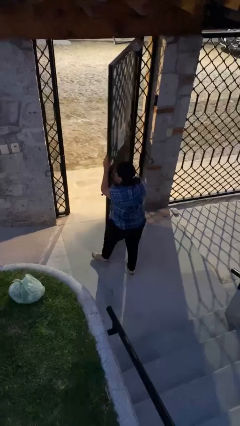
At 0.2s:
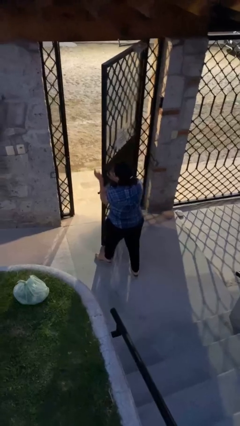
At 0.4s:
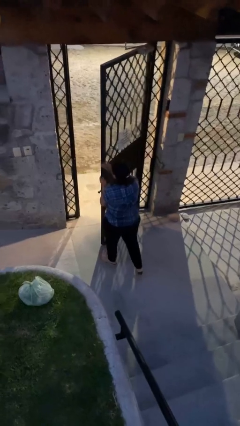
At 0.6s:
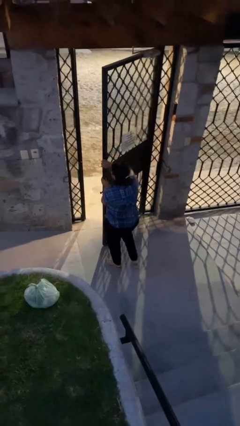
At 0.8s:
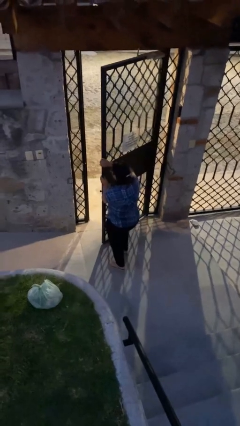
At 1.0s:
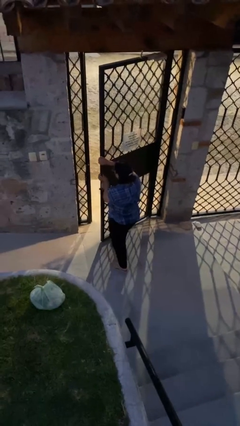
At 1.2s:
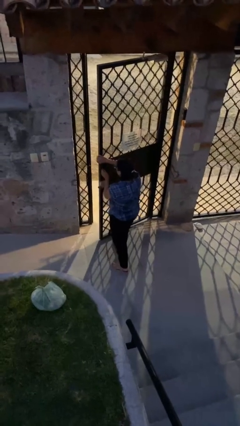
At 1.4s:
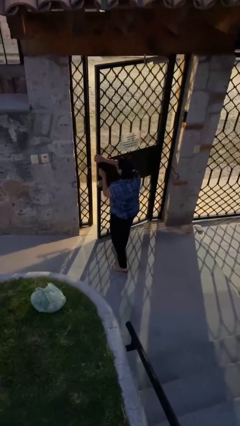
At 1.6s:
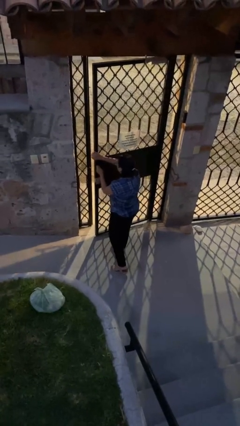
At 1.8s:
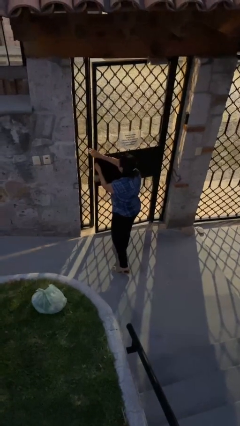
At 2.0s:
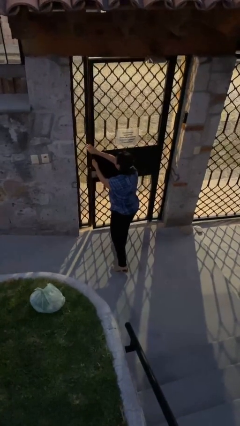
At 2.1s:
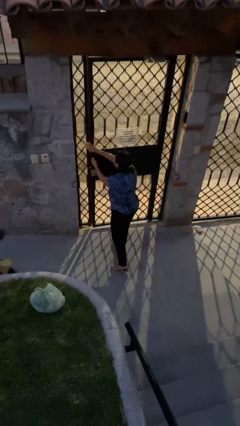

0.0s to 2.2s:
person closes facility door

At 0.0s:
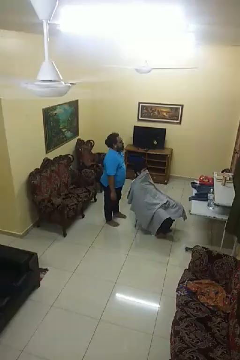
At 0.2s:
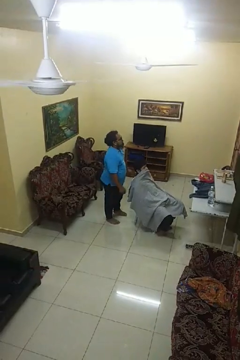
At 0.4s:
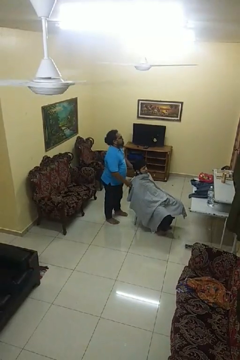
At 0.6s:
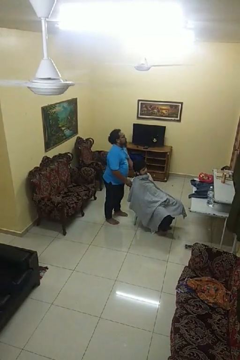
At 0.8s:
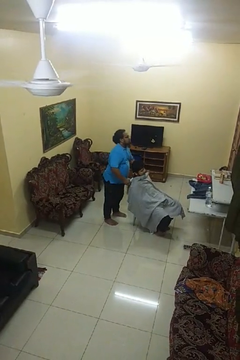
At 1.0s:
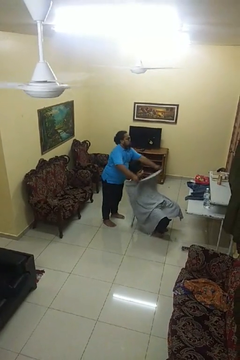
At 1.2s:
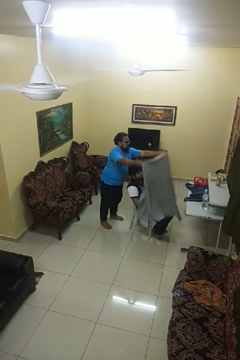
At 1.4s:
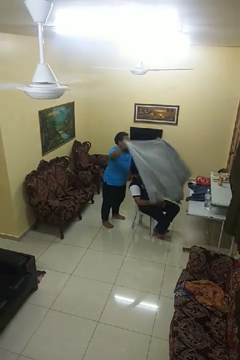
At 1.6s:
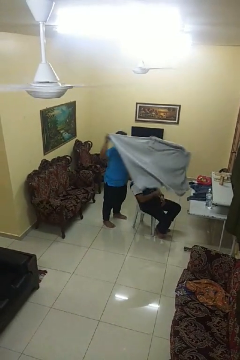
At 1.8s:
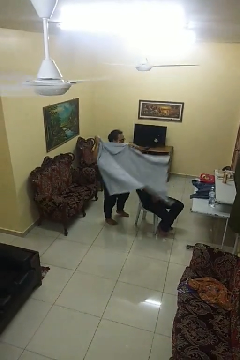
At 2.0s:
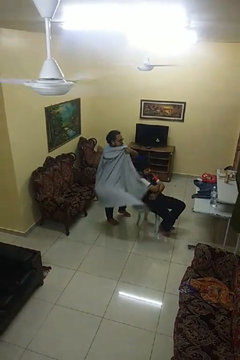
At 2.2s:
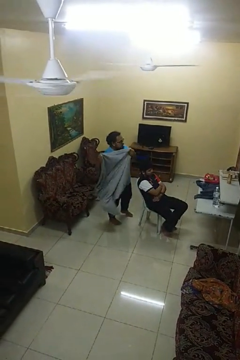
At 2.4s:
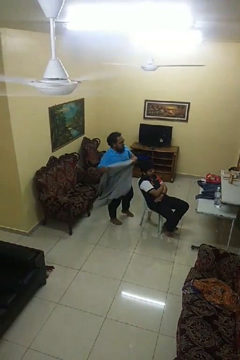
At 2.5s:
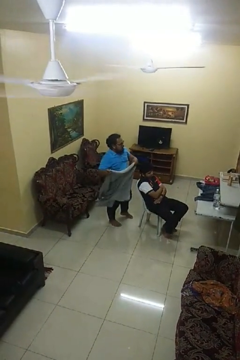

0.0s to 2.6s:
person uncovers friend with blanket

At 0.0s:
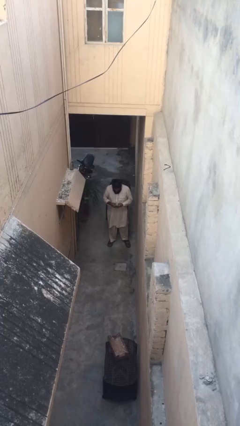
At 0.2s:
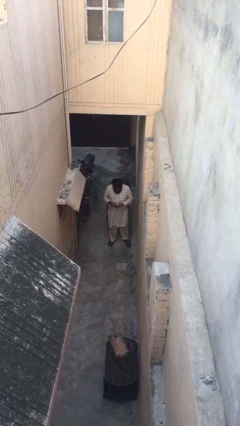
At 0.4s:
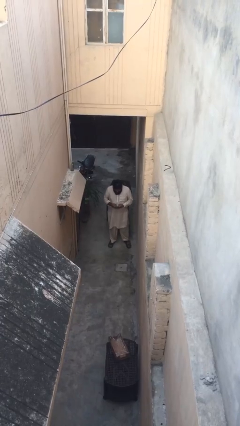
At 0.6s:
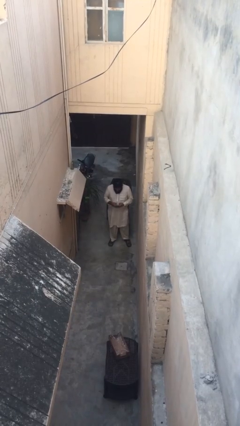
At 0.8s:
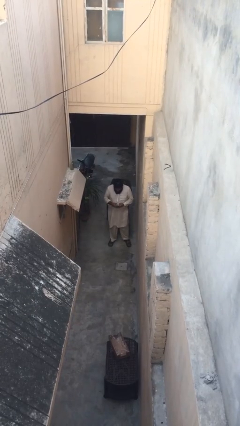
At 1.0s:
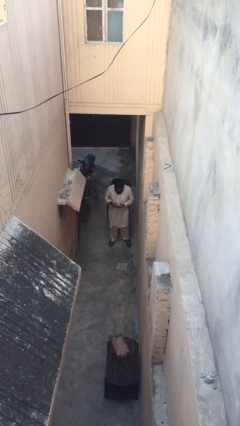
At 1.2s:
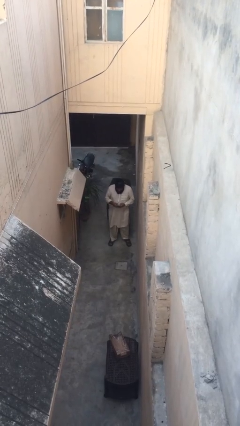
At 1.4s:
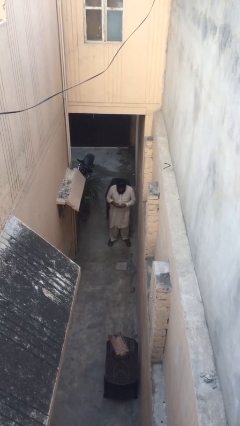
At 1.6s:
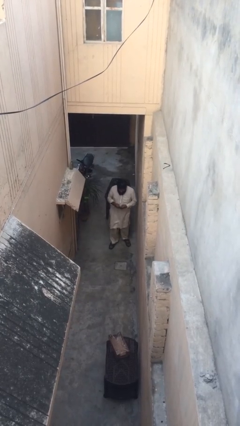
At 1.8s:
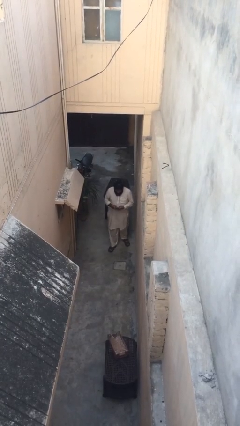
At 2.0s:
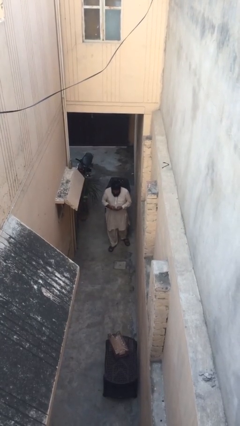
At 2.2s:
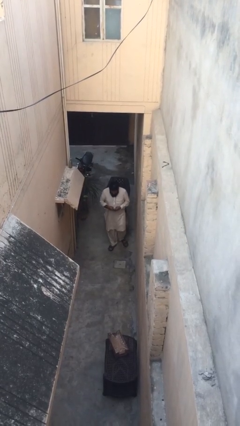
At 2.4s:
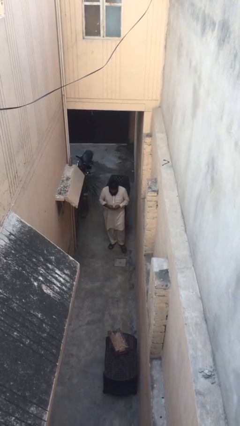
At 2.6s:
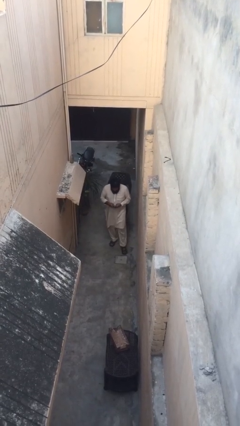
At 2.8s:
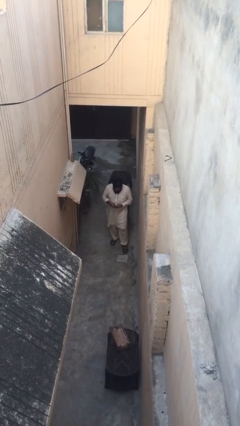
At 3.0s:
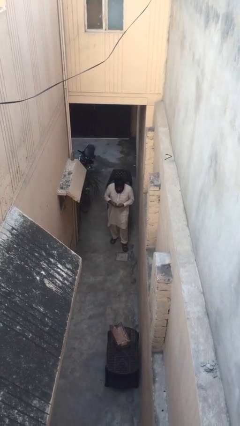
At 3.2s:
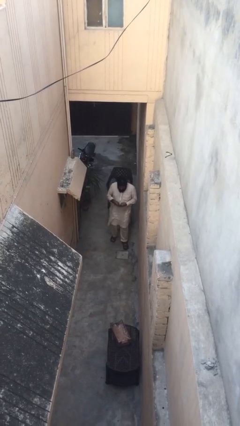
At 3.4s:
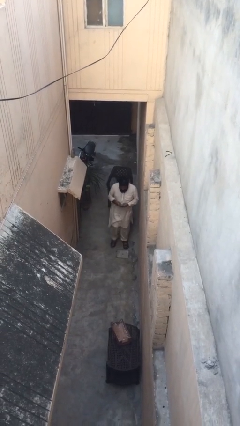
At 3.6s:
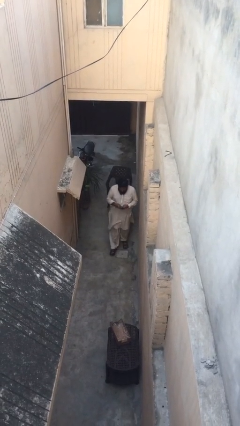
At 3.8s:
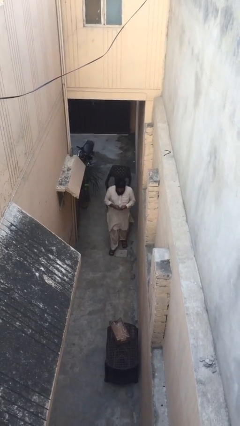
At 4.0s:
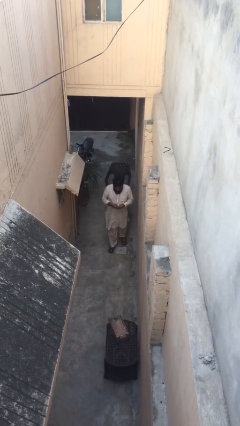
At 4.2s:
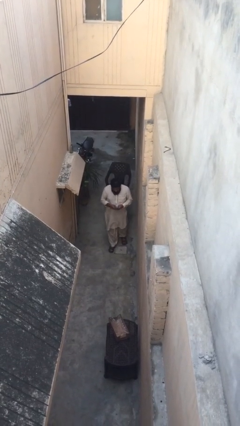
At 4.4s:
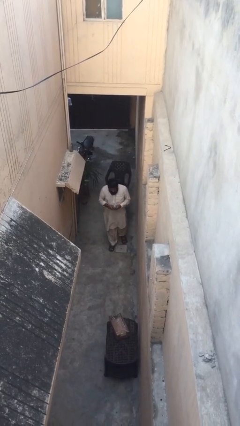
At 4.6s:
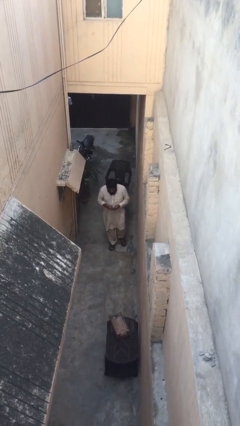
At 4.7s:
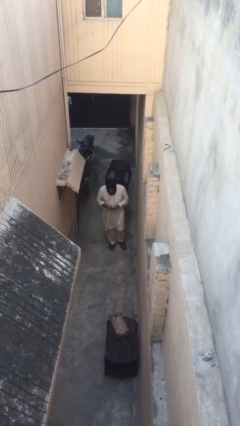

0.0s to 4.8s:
person texts on phone

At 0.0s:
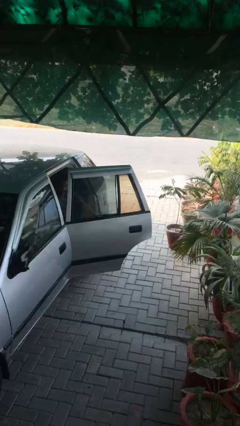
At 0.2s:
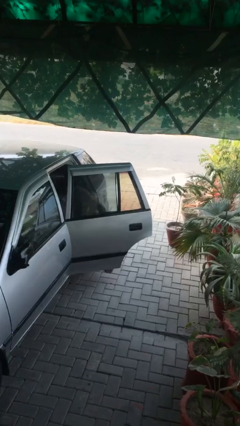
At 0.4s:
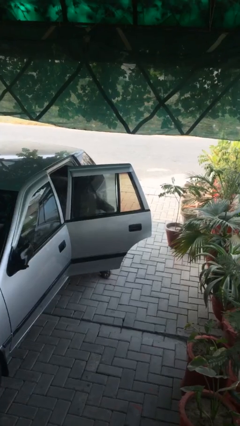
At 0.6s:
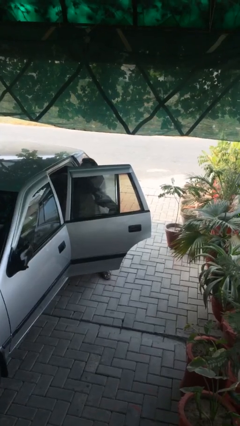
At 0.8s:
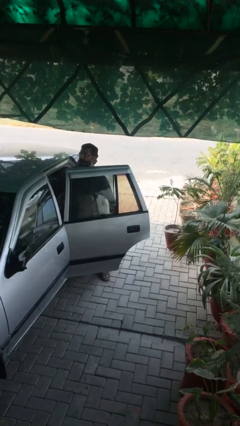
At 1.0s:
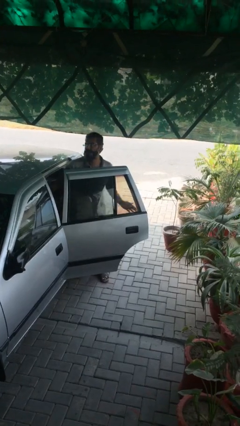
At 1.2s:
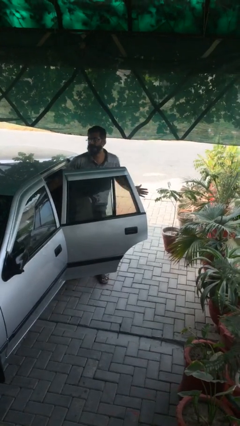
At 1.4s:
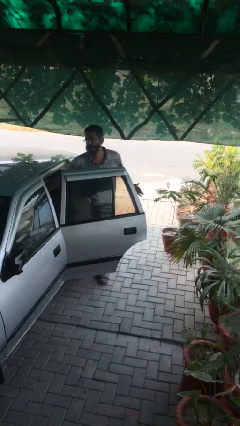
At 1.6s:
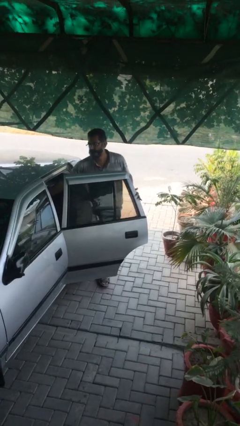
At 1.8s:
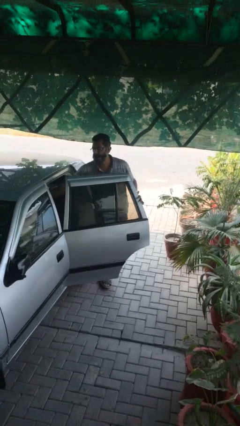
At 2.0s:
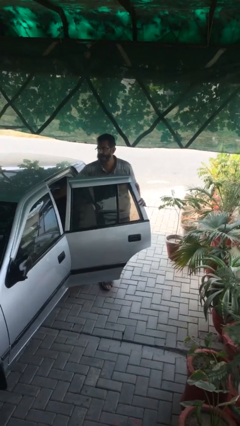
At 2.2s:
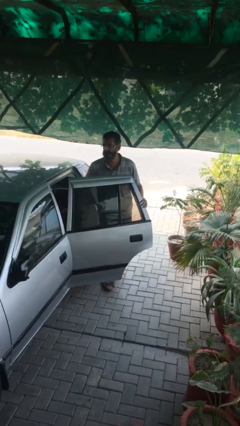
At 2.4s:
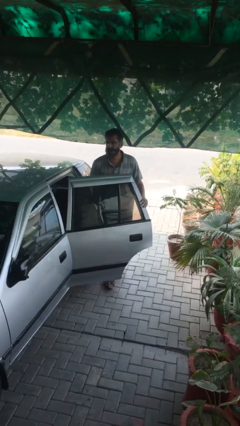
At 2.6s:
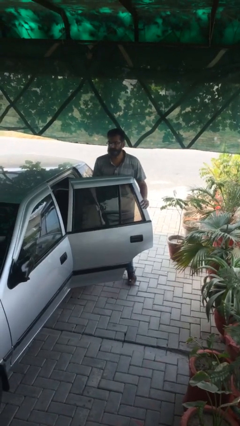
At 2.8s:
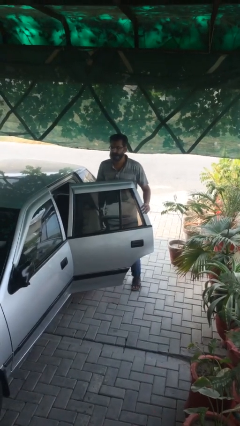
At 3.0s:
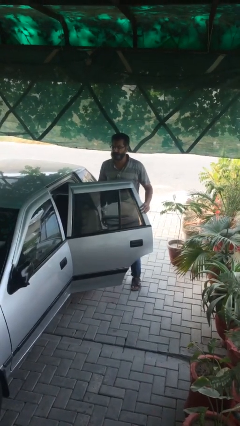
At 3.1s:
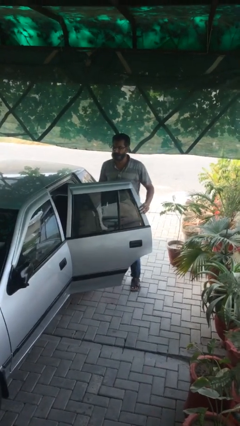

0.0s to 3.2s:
person exits car

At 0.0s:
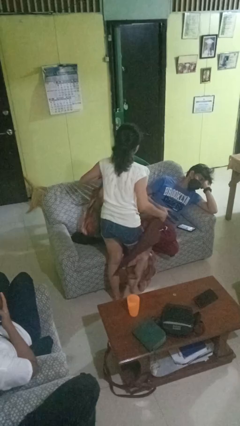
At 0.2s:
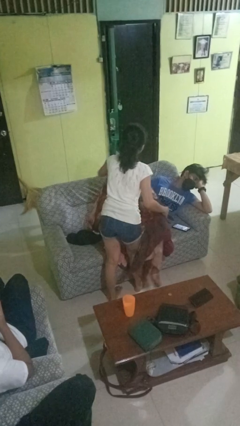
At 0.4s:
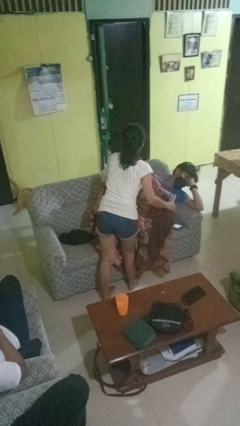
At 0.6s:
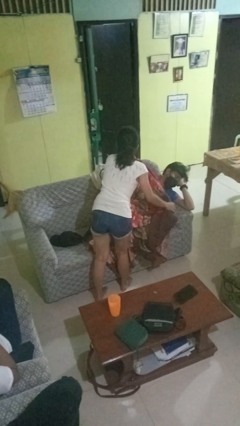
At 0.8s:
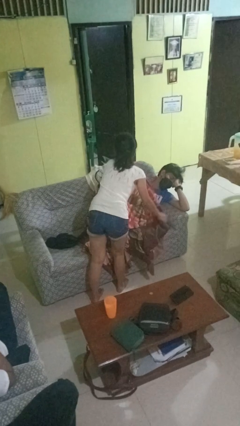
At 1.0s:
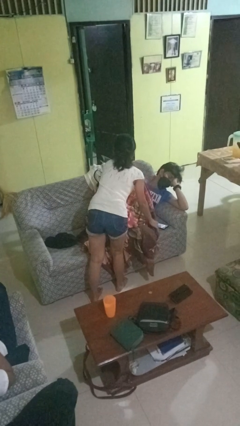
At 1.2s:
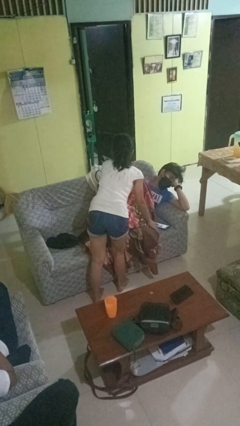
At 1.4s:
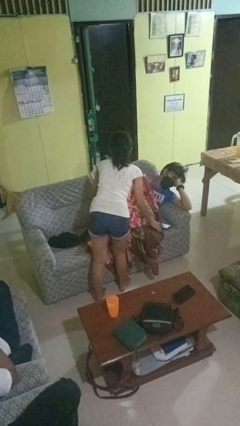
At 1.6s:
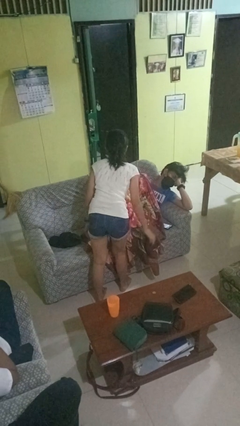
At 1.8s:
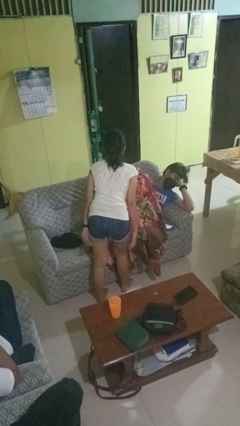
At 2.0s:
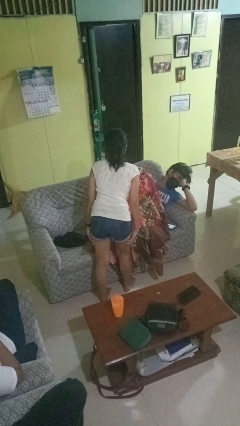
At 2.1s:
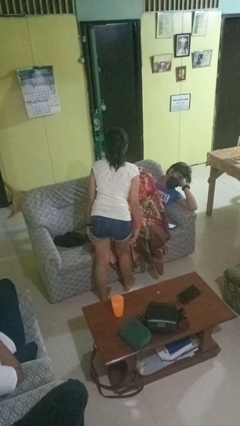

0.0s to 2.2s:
person covers friend with blanket

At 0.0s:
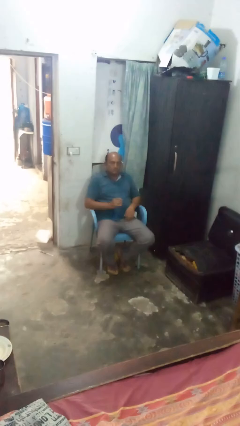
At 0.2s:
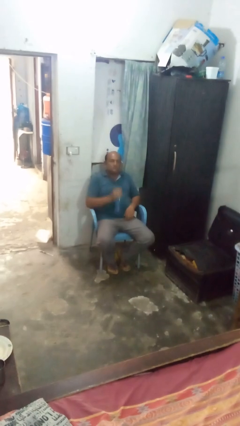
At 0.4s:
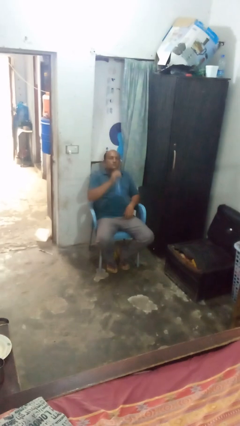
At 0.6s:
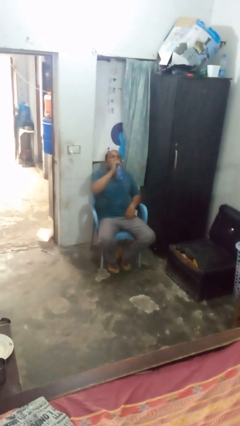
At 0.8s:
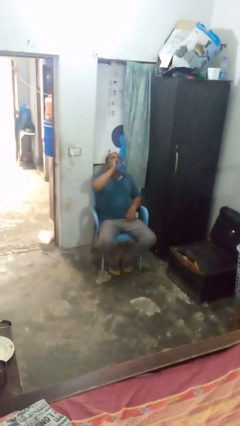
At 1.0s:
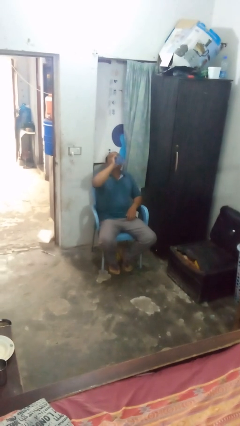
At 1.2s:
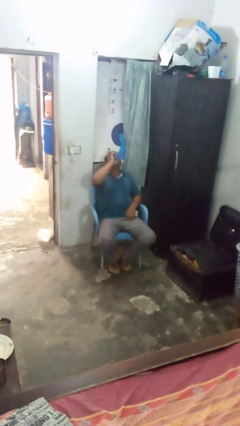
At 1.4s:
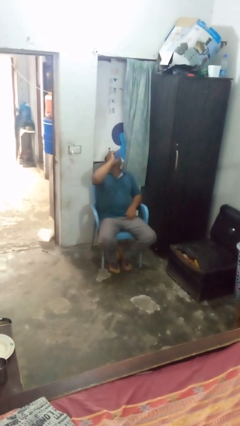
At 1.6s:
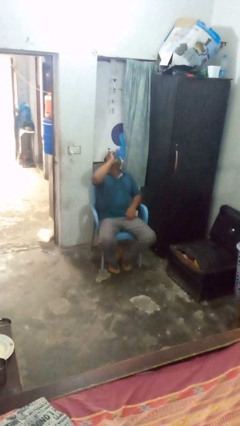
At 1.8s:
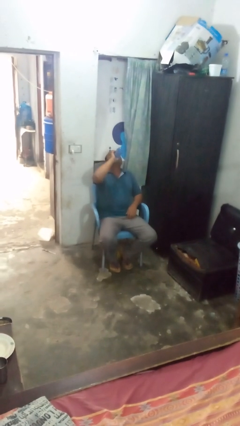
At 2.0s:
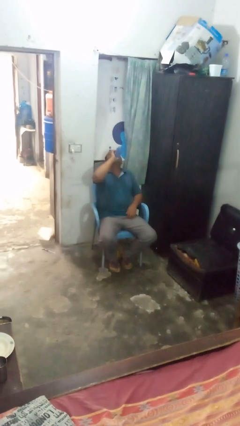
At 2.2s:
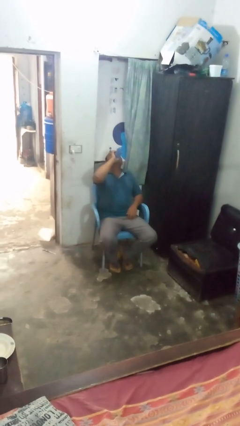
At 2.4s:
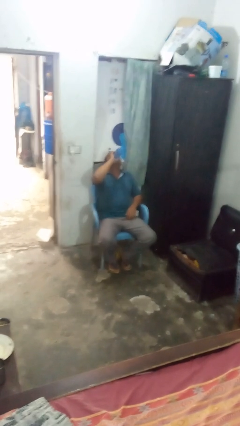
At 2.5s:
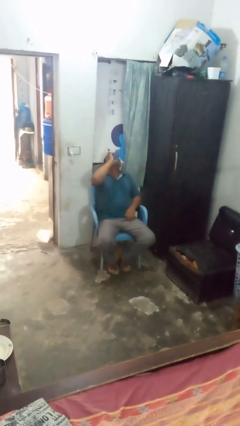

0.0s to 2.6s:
person drinks from bottle

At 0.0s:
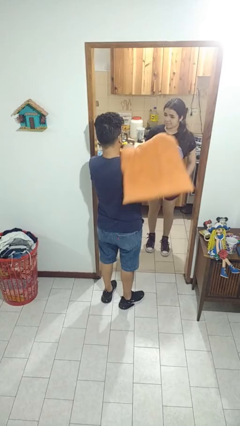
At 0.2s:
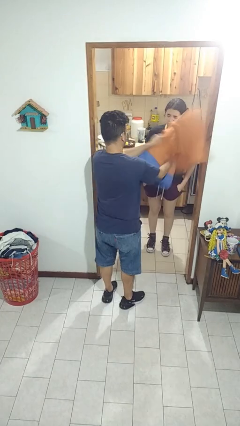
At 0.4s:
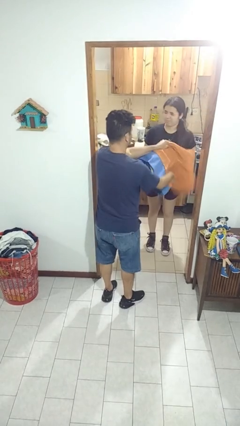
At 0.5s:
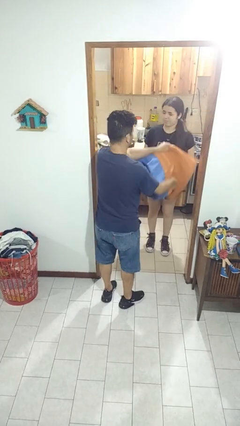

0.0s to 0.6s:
person hits person with pillow
